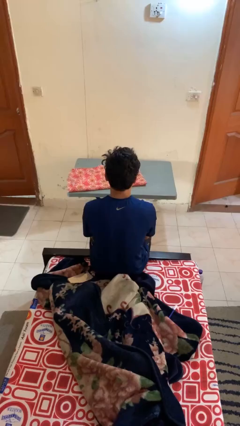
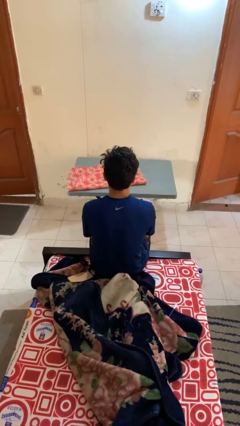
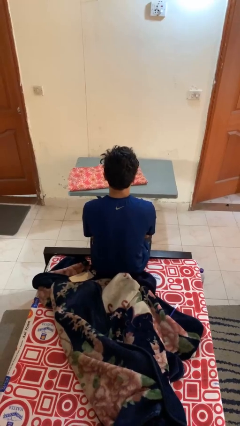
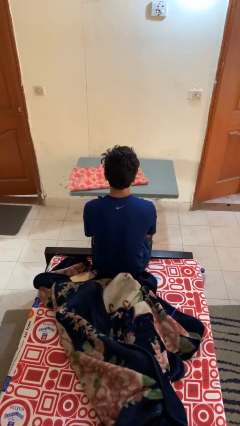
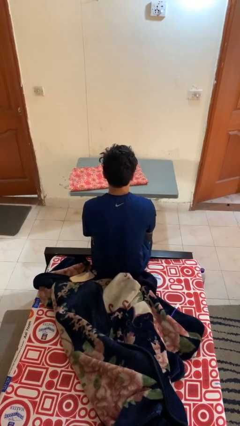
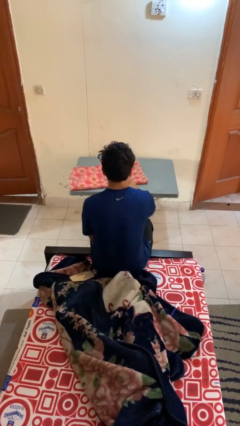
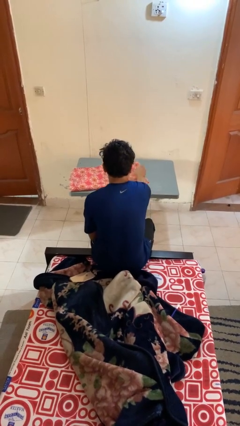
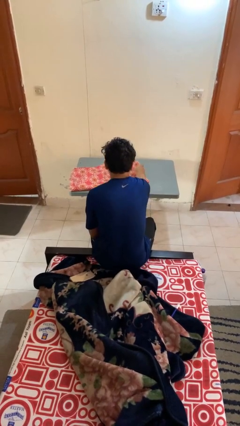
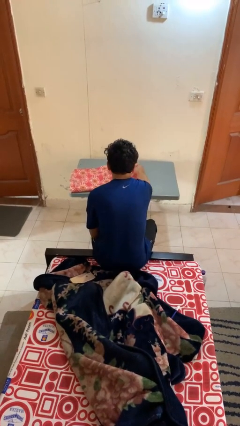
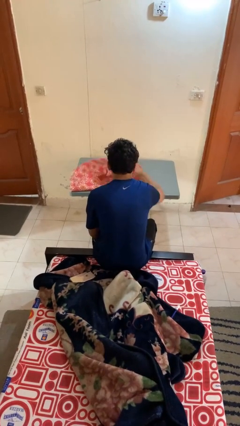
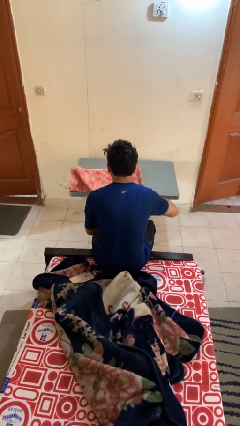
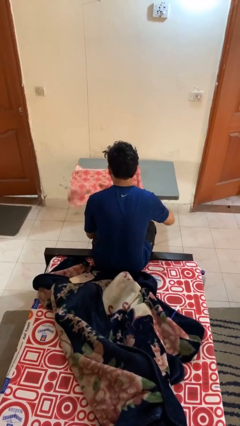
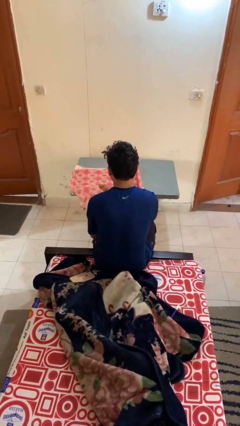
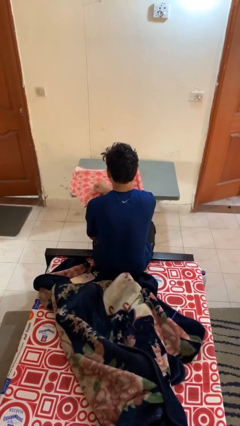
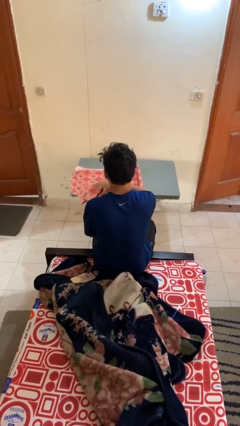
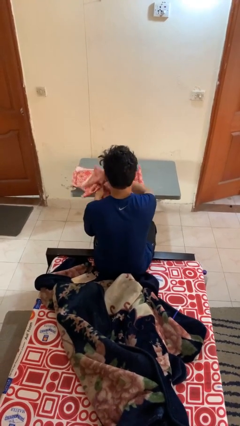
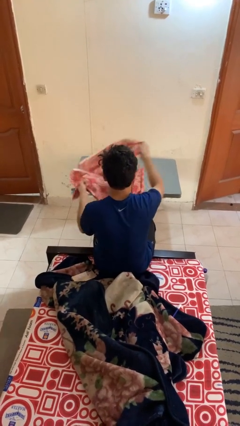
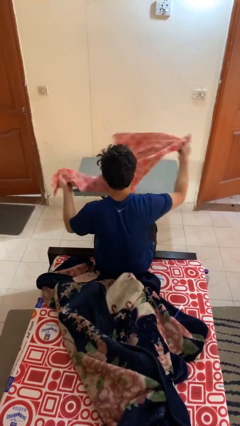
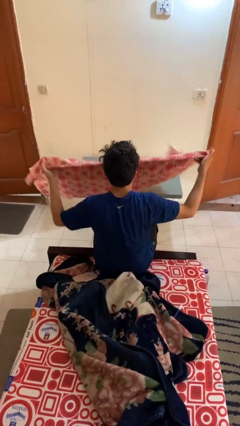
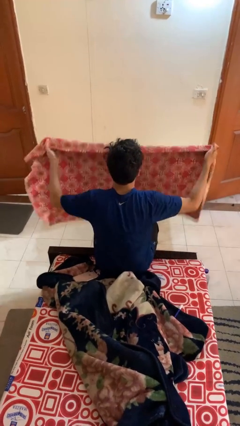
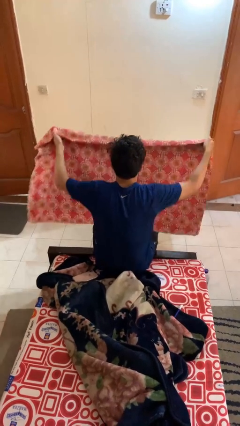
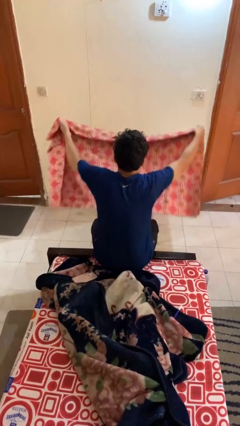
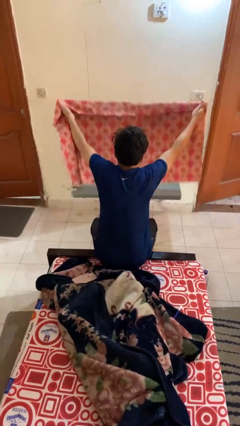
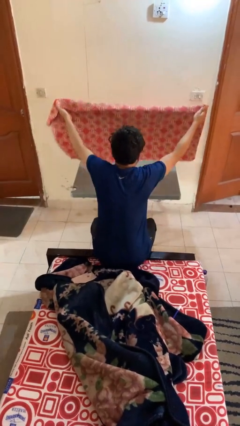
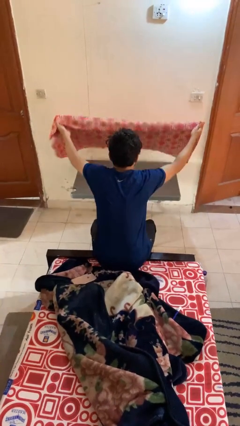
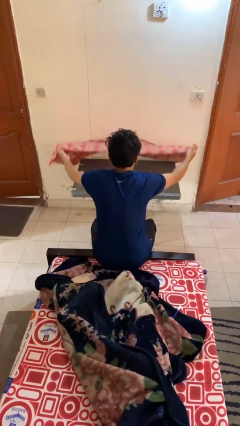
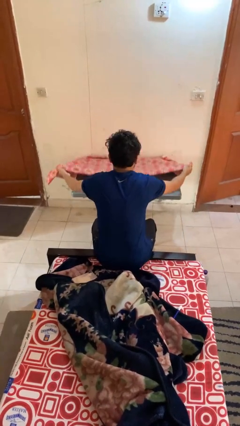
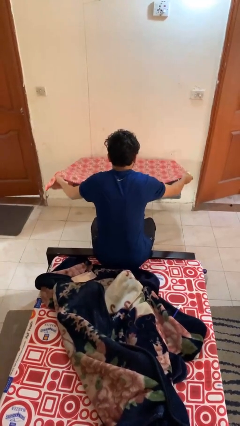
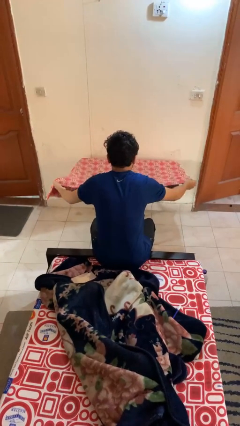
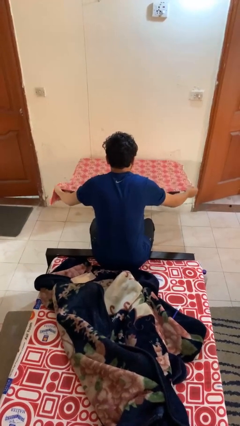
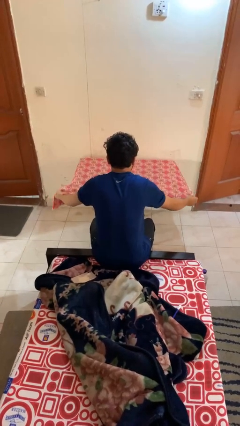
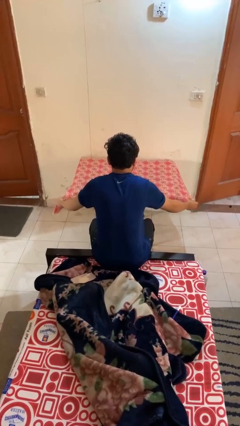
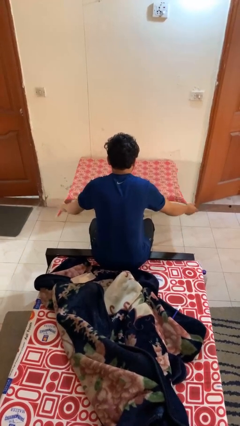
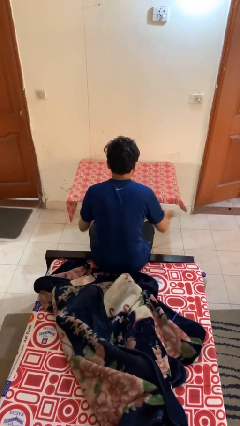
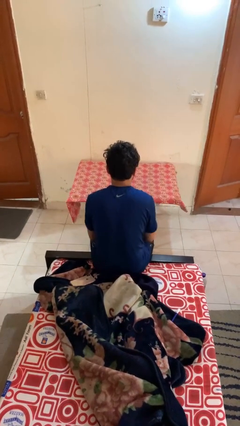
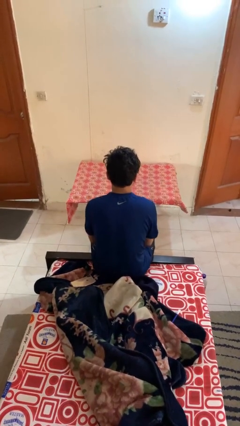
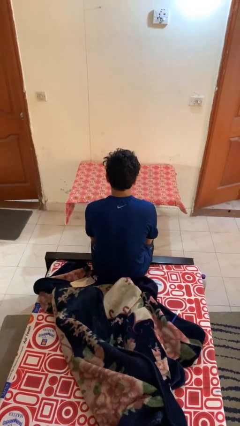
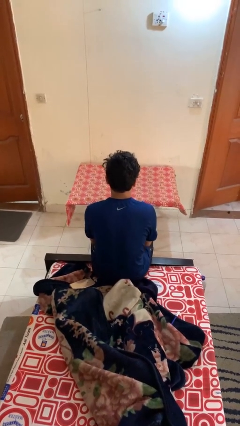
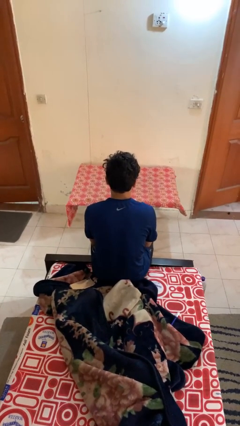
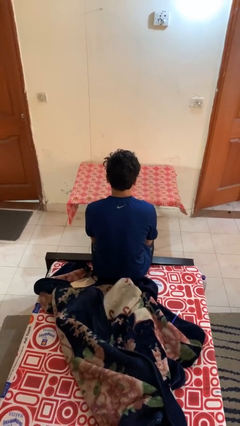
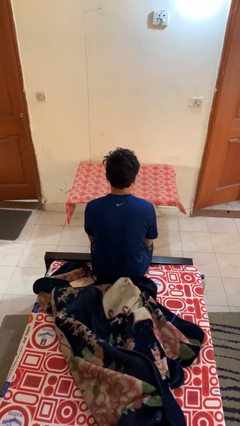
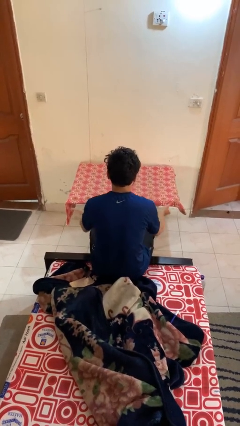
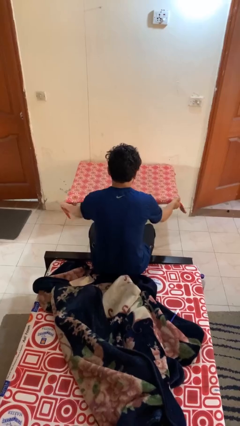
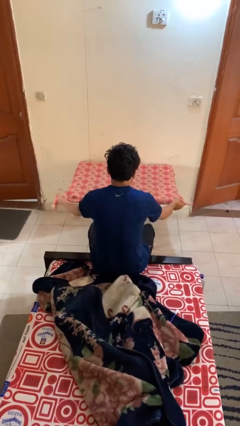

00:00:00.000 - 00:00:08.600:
person spreads tablecloth

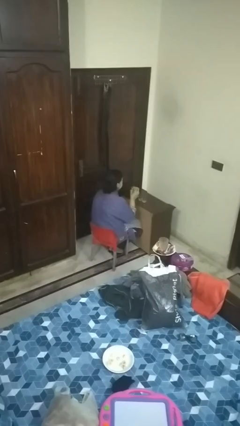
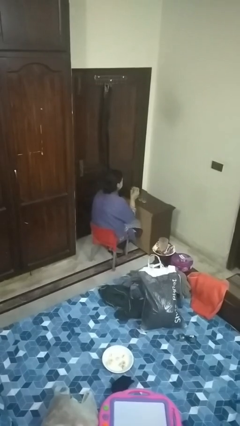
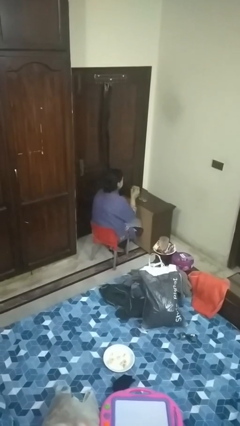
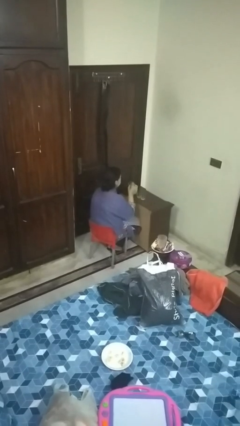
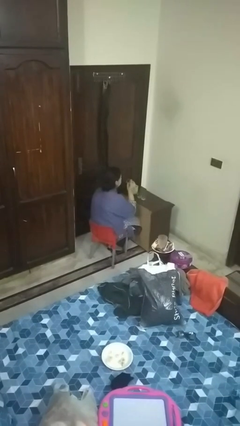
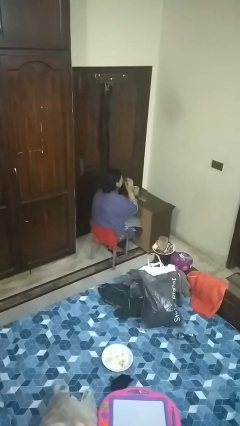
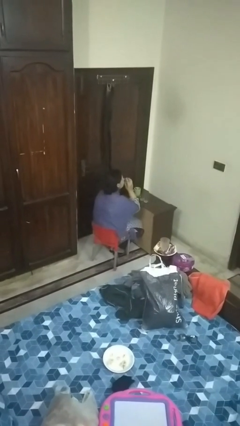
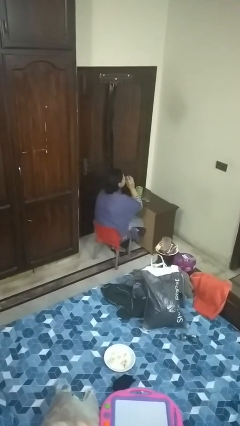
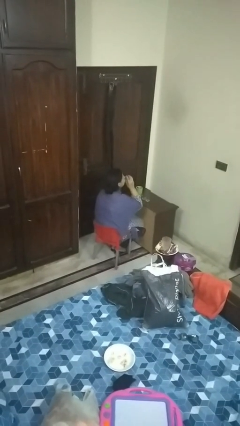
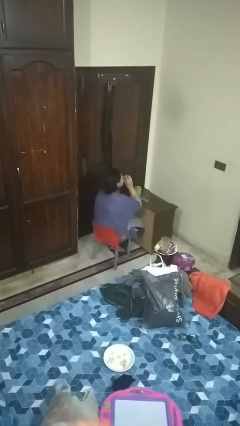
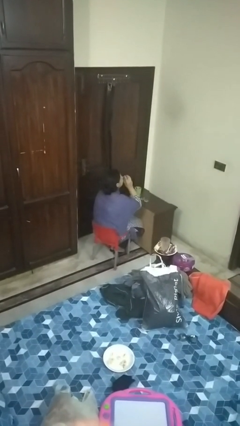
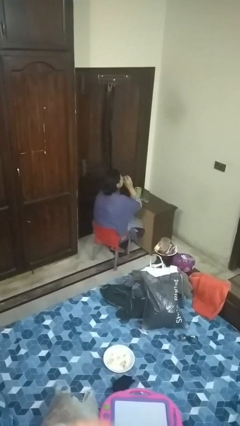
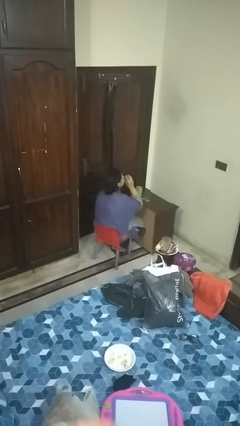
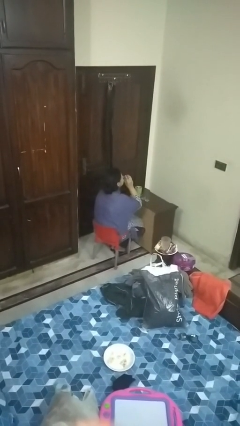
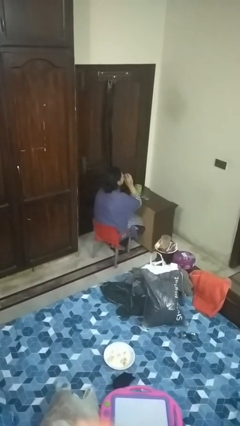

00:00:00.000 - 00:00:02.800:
person drinks from shotglass

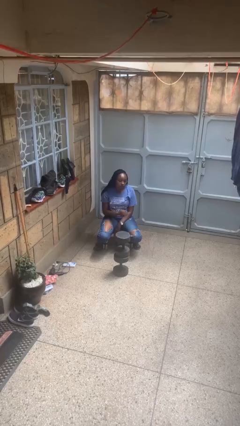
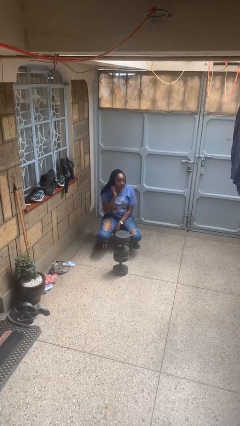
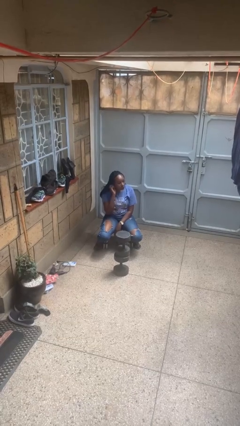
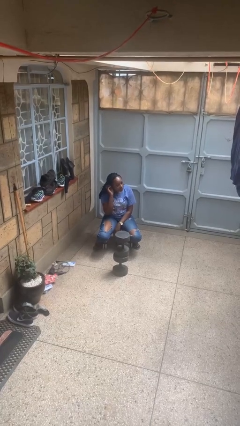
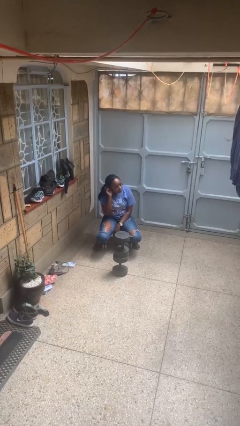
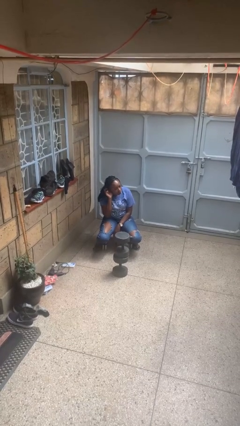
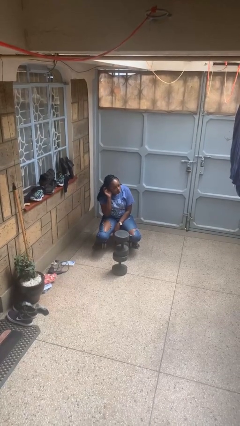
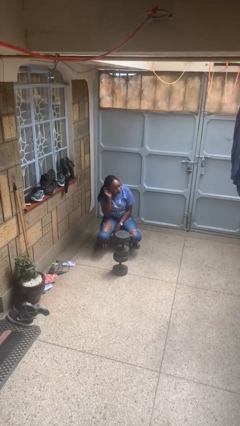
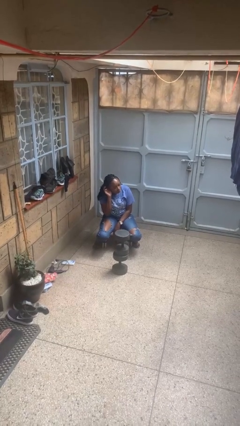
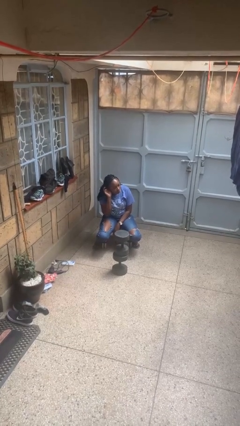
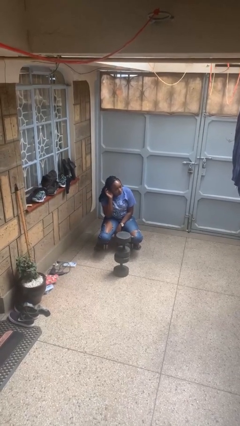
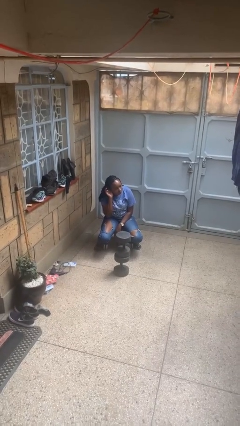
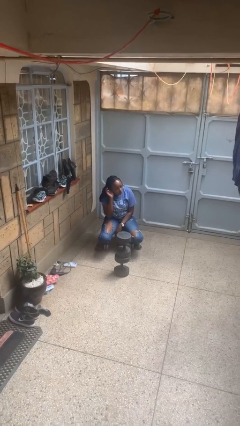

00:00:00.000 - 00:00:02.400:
person gestures listen closely

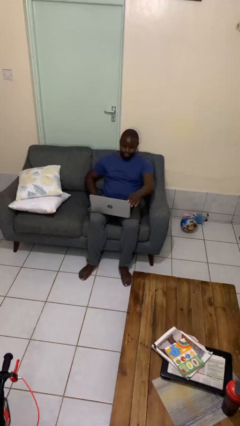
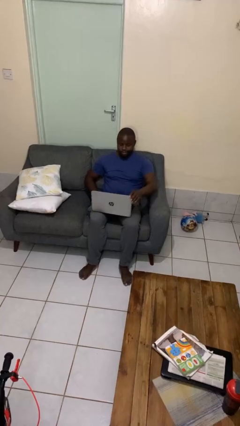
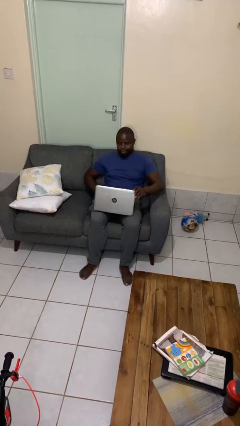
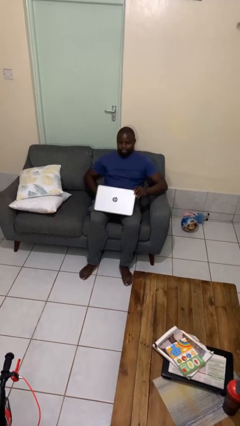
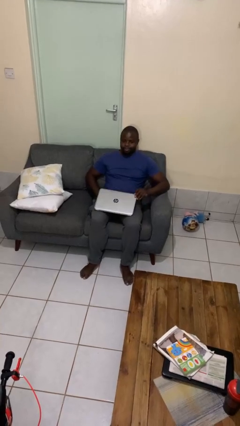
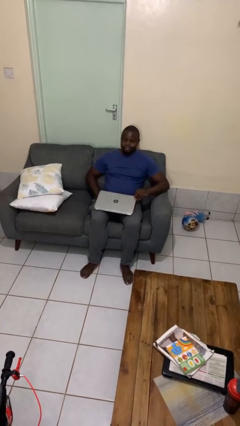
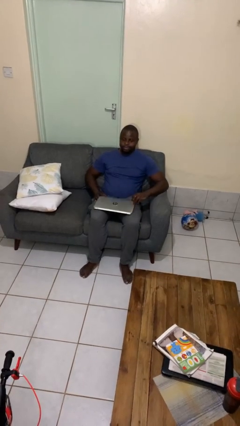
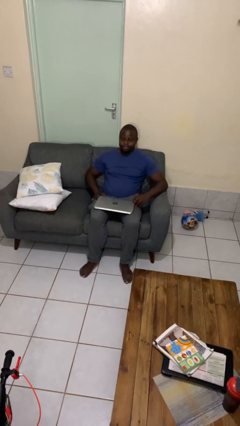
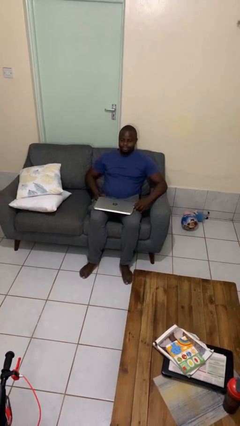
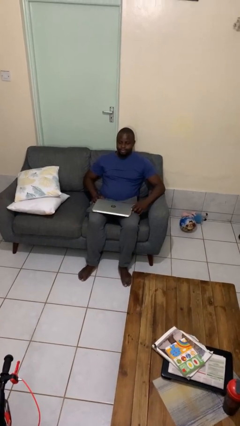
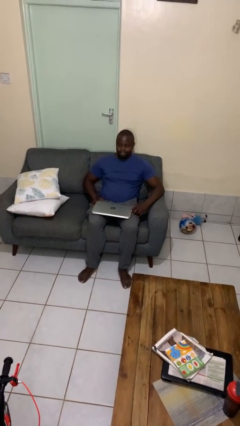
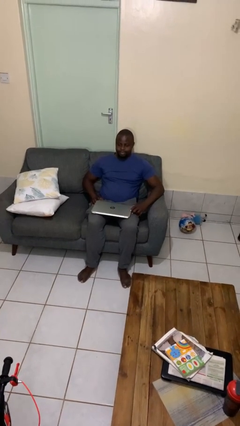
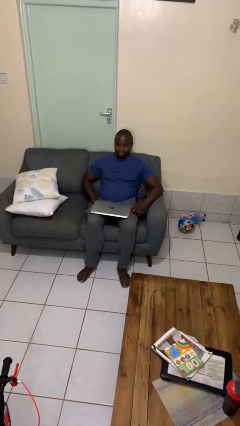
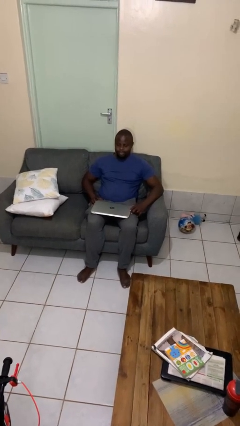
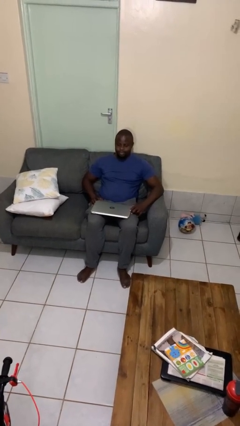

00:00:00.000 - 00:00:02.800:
person closes laptop

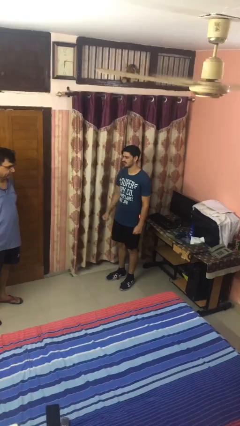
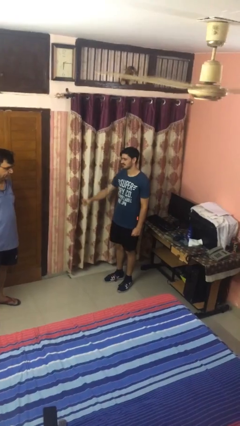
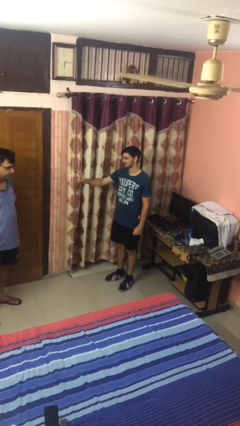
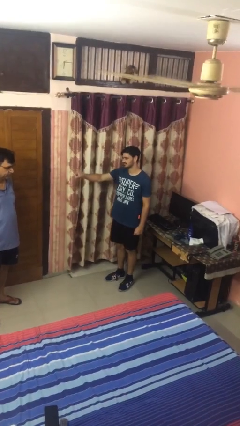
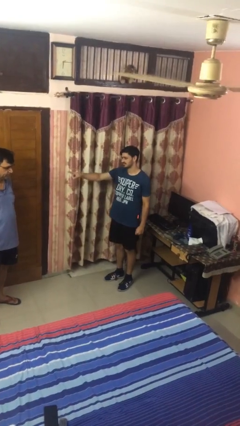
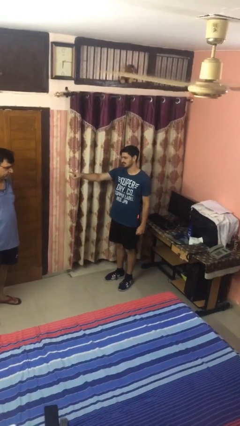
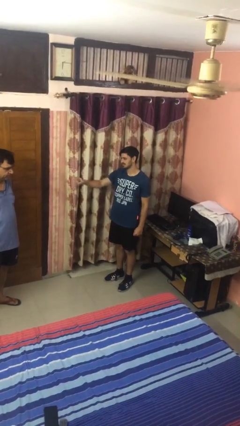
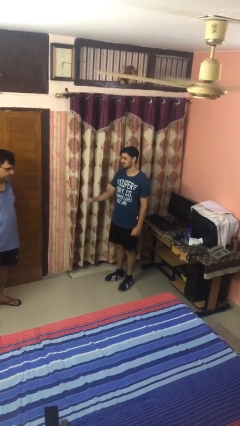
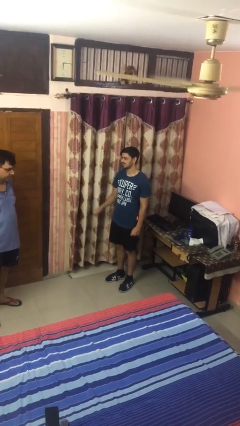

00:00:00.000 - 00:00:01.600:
person points at person
